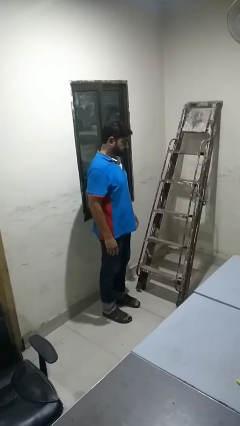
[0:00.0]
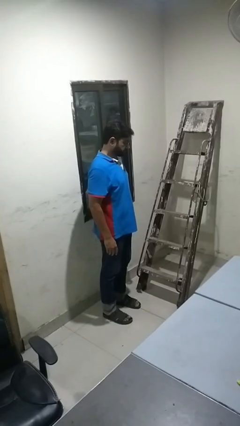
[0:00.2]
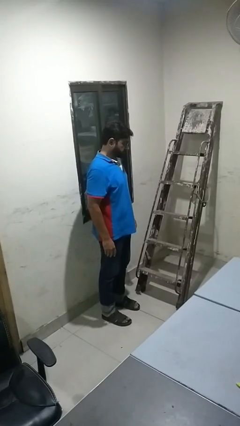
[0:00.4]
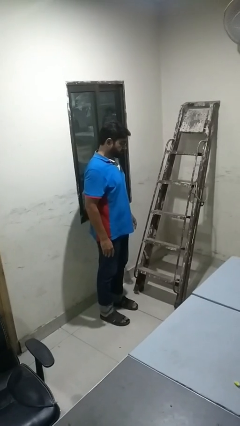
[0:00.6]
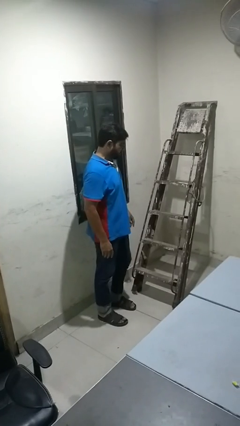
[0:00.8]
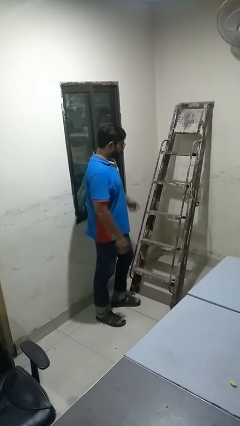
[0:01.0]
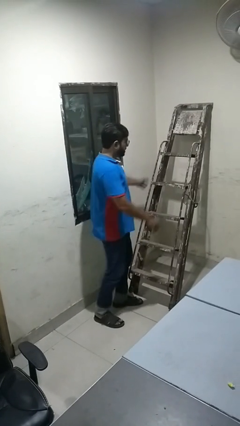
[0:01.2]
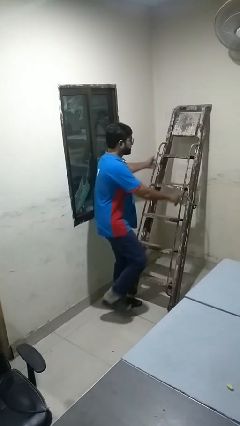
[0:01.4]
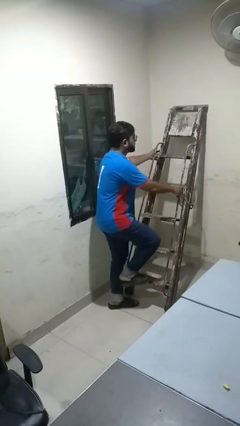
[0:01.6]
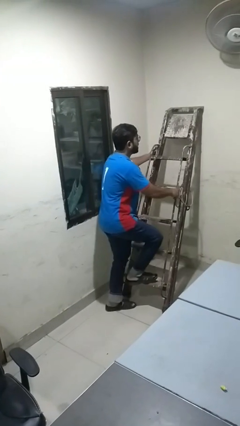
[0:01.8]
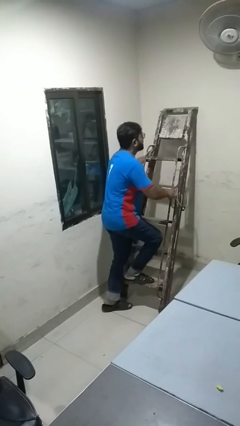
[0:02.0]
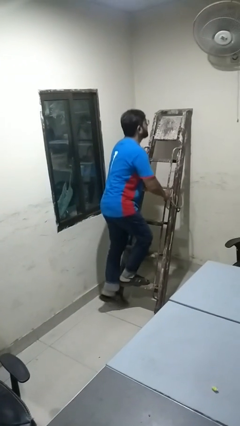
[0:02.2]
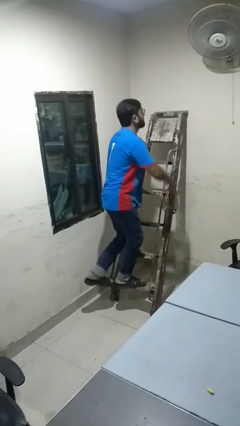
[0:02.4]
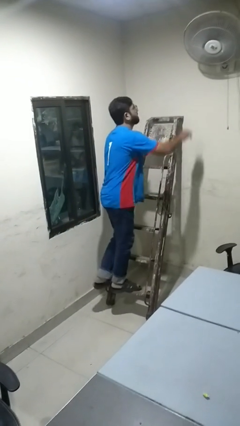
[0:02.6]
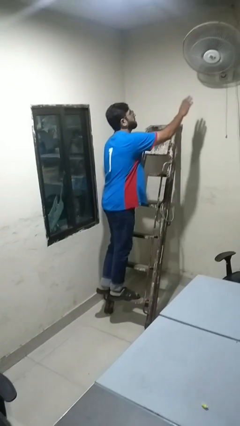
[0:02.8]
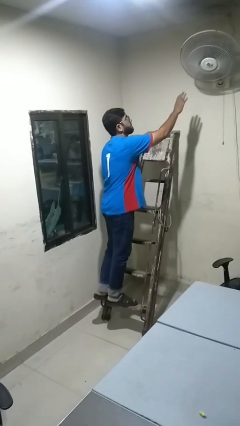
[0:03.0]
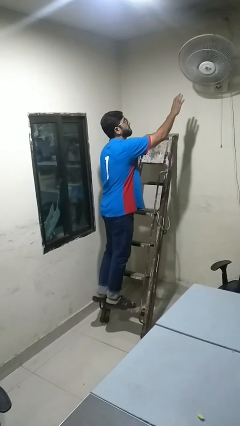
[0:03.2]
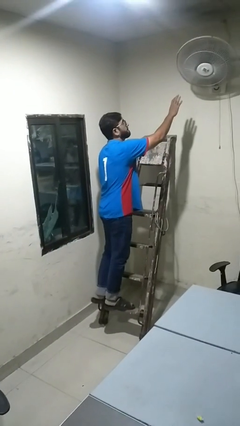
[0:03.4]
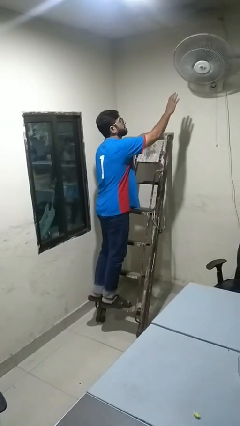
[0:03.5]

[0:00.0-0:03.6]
person climbs up ladder

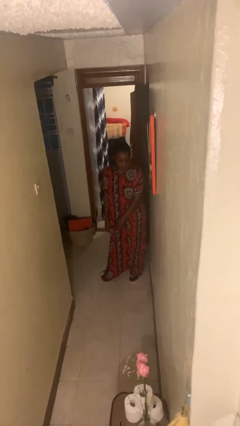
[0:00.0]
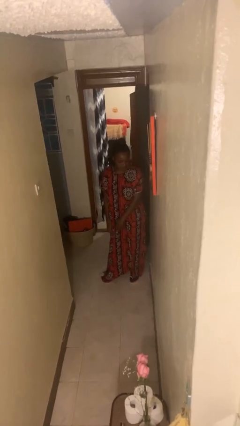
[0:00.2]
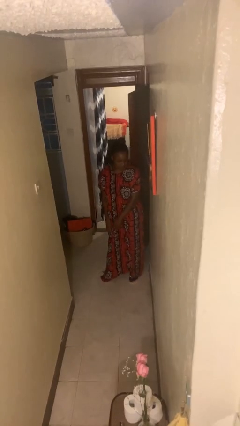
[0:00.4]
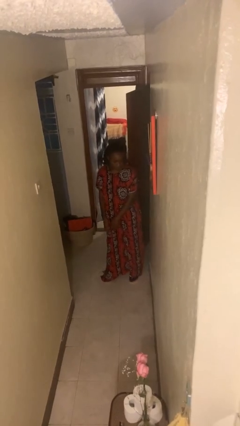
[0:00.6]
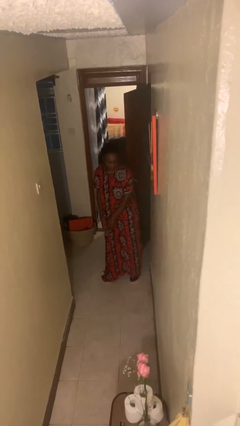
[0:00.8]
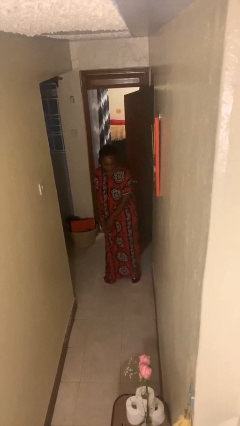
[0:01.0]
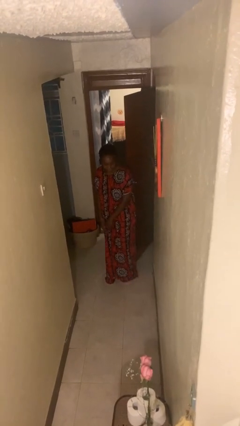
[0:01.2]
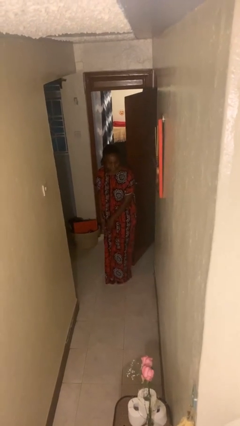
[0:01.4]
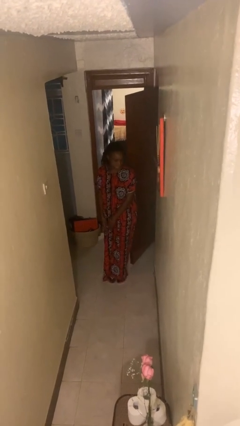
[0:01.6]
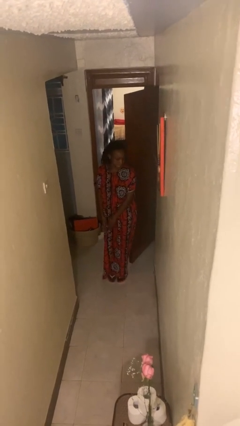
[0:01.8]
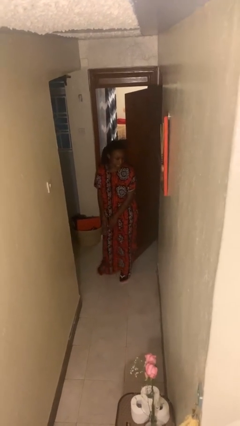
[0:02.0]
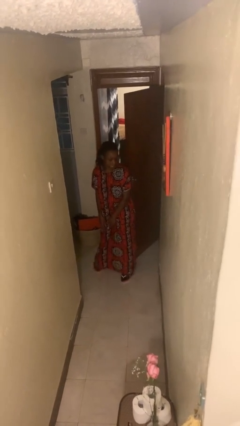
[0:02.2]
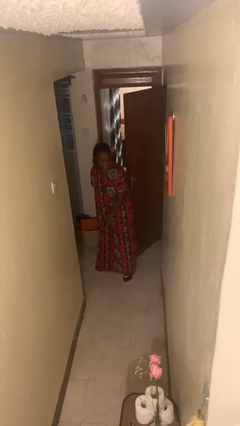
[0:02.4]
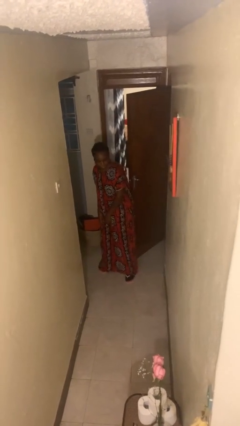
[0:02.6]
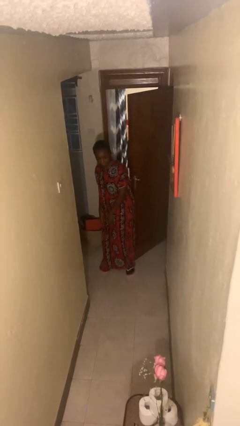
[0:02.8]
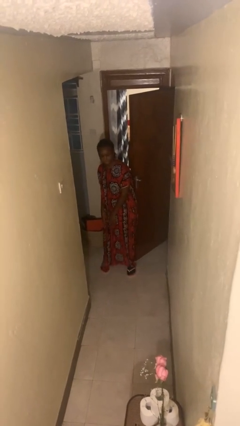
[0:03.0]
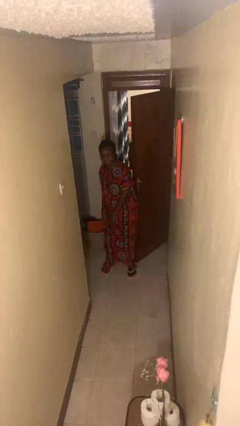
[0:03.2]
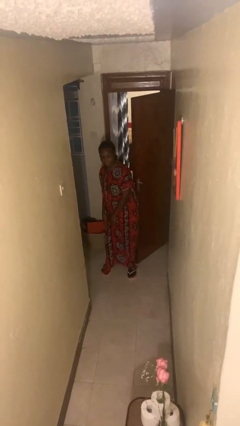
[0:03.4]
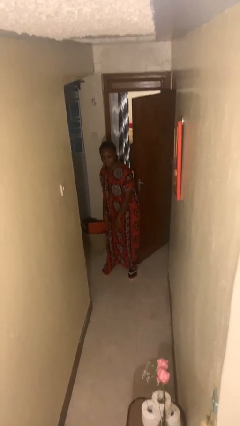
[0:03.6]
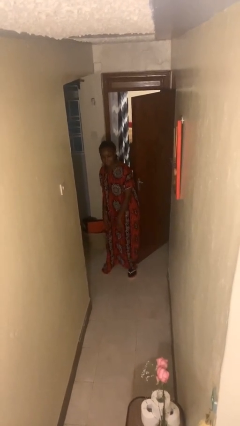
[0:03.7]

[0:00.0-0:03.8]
person opens facility door

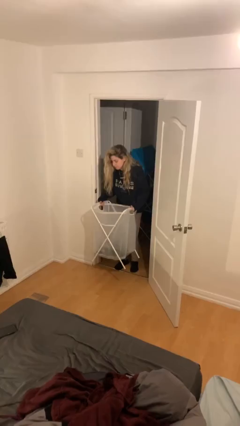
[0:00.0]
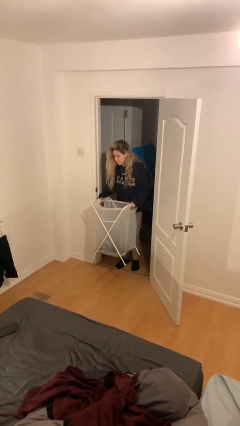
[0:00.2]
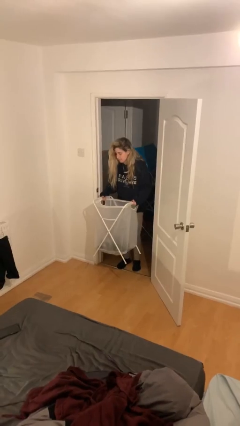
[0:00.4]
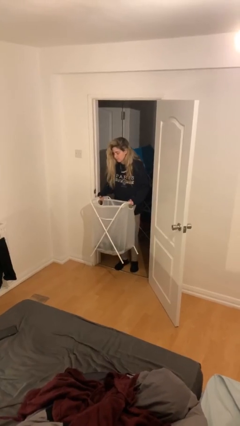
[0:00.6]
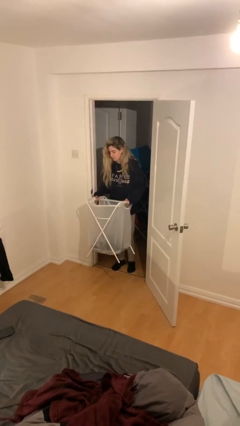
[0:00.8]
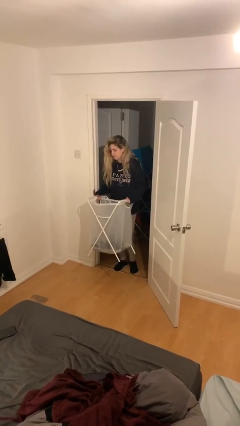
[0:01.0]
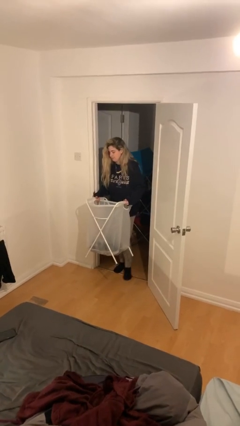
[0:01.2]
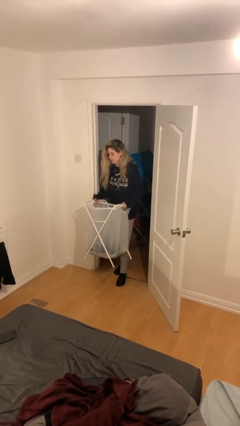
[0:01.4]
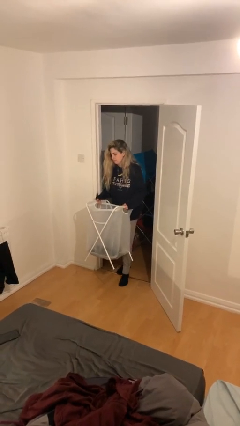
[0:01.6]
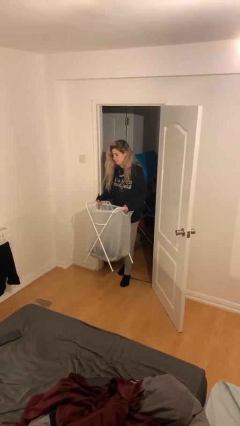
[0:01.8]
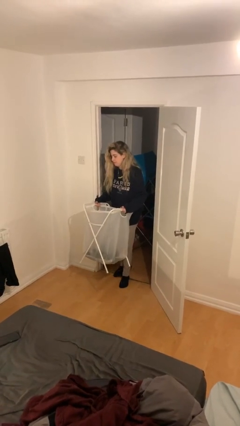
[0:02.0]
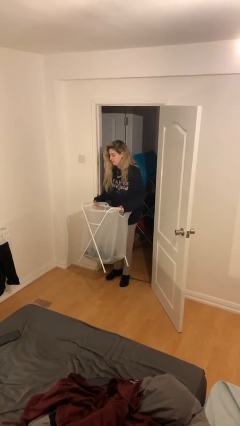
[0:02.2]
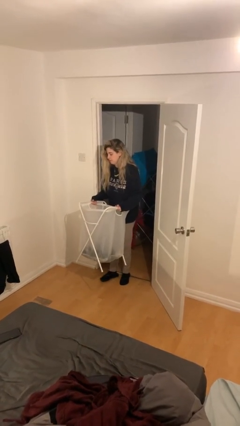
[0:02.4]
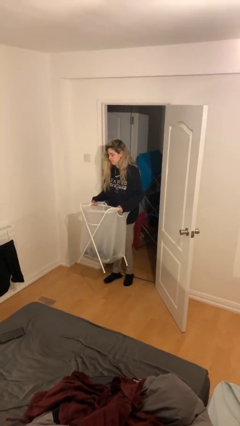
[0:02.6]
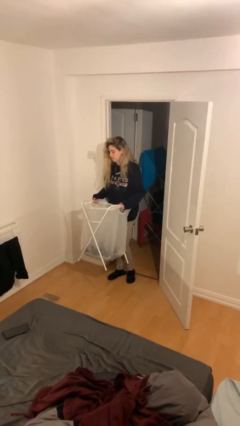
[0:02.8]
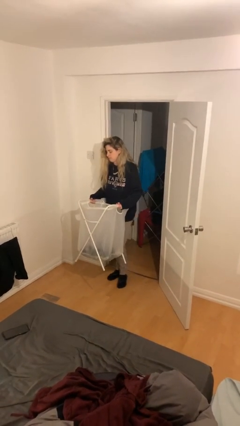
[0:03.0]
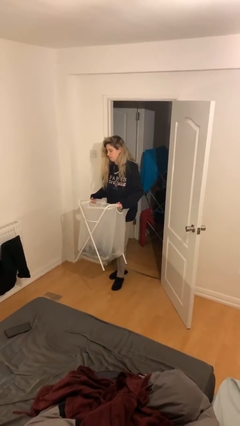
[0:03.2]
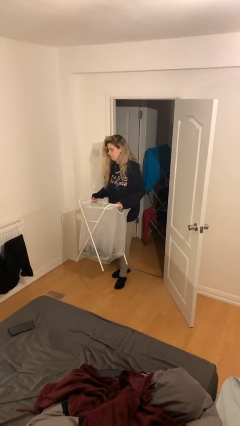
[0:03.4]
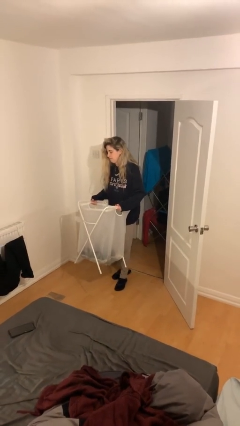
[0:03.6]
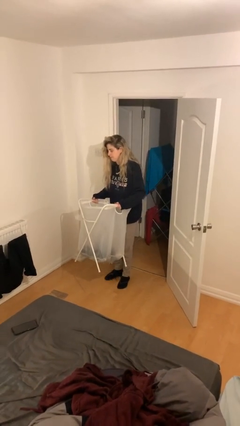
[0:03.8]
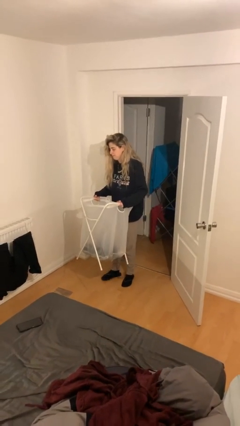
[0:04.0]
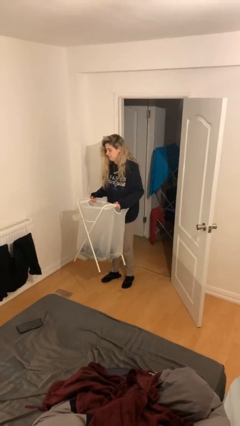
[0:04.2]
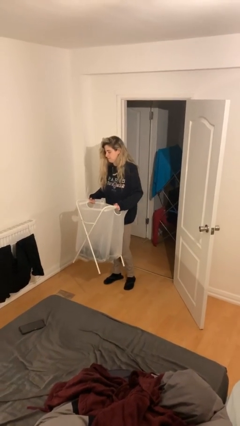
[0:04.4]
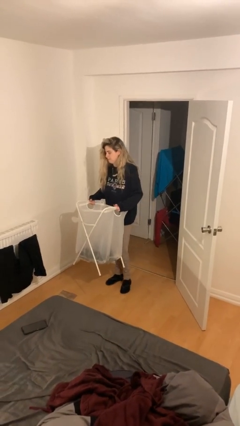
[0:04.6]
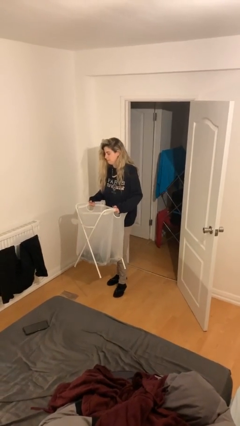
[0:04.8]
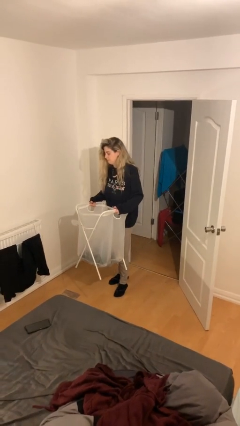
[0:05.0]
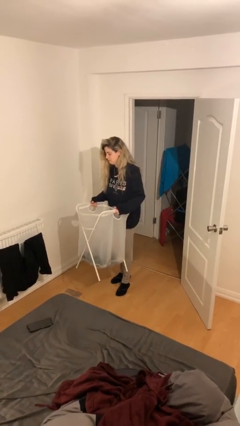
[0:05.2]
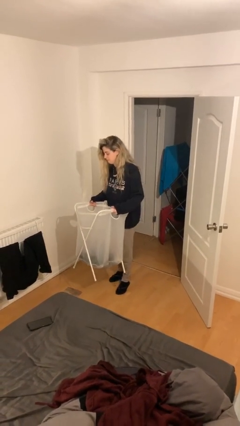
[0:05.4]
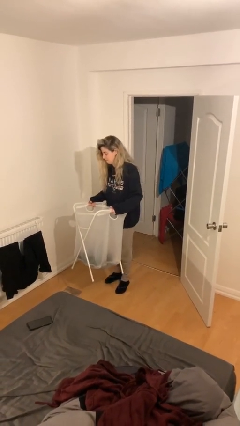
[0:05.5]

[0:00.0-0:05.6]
person carries heavy object

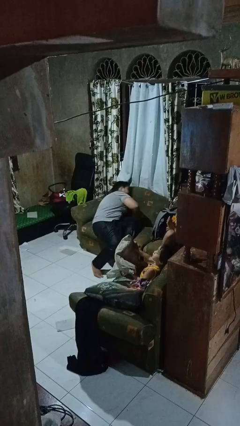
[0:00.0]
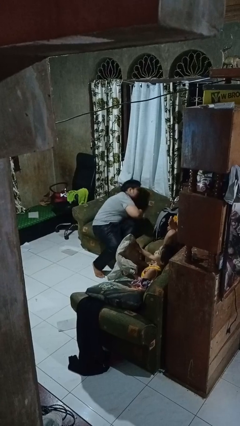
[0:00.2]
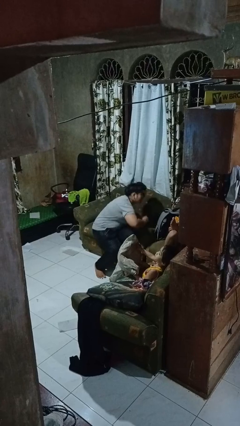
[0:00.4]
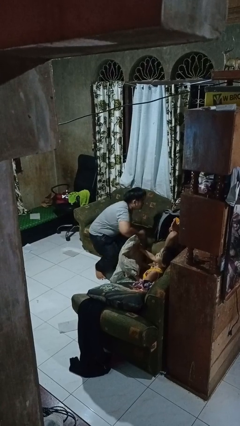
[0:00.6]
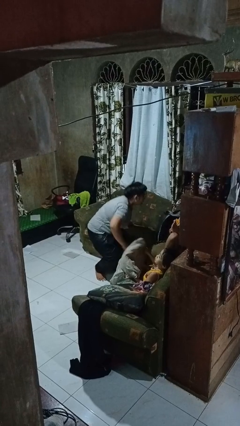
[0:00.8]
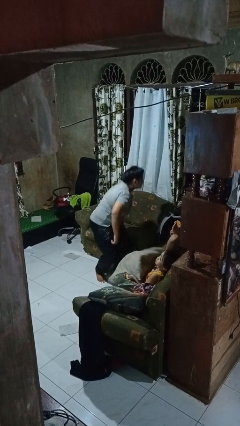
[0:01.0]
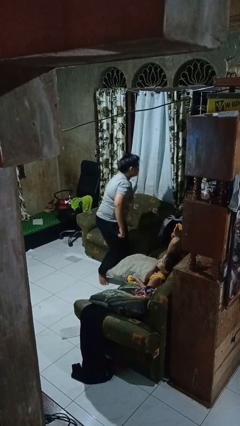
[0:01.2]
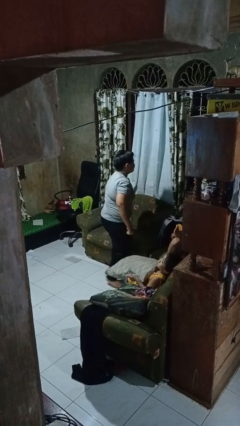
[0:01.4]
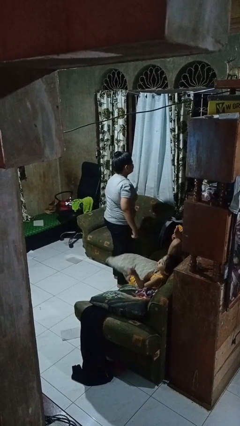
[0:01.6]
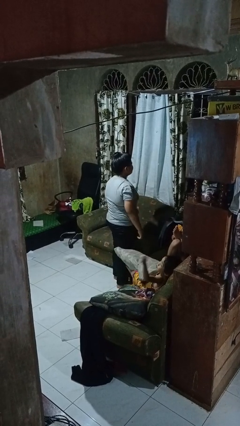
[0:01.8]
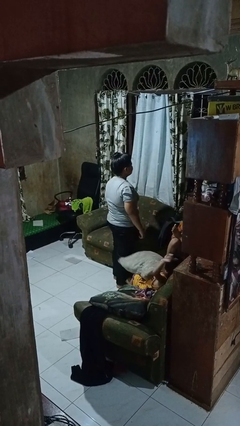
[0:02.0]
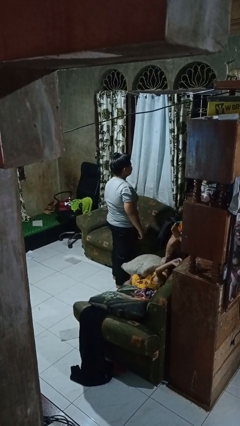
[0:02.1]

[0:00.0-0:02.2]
person stands up

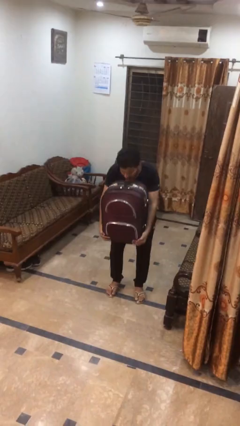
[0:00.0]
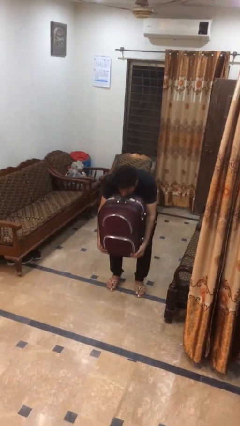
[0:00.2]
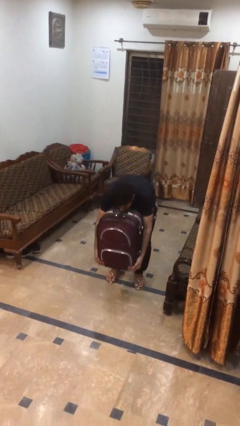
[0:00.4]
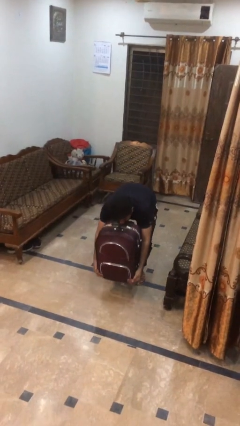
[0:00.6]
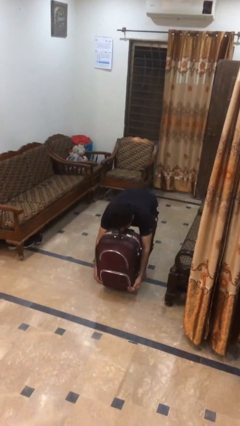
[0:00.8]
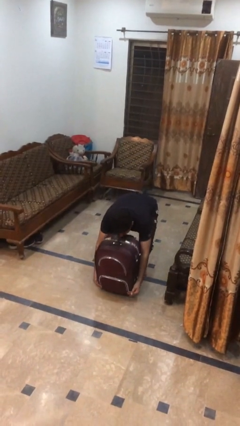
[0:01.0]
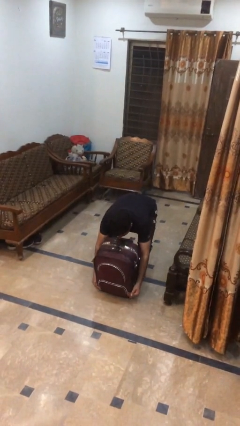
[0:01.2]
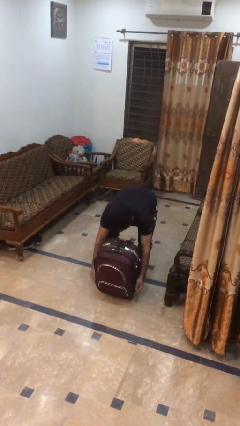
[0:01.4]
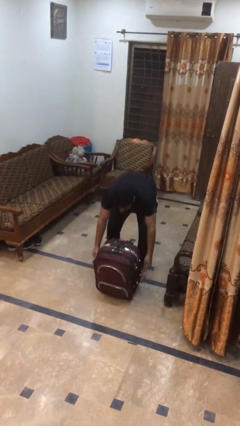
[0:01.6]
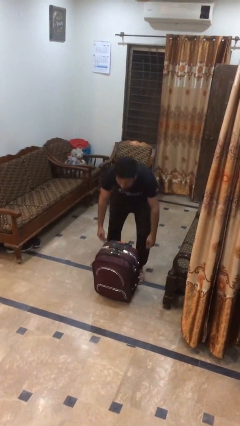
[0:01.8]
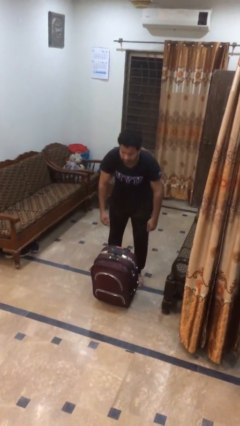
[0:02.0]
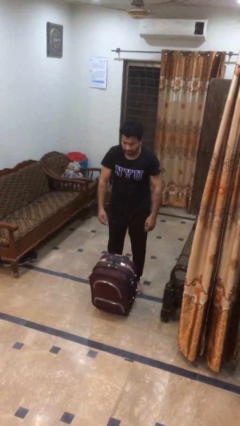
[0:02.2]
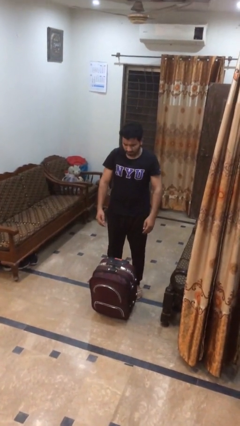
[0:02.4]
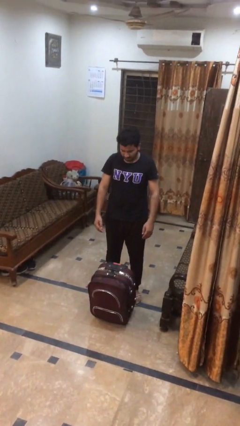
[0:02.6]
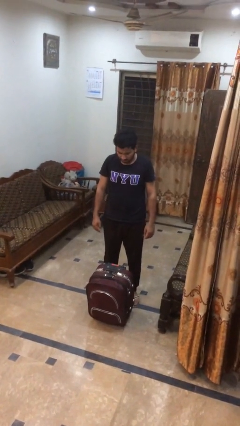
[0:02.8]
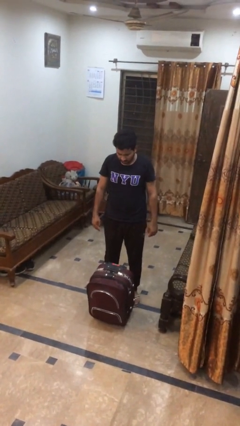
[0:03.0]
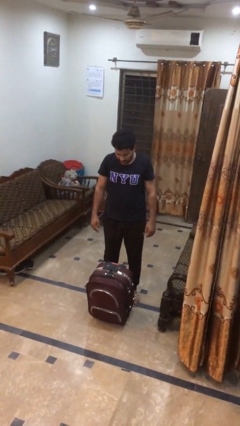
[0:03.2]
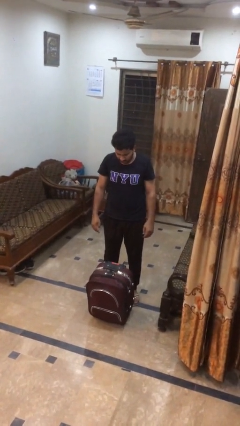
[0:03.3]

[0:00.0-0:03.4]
person puts down object on floor
